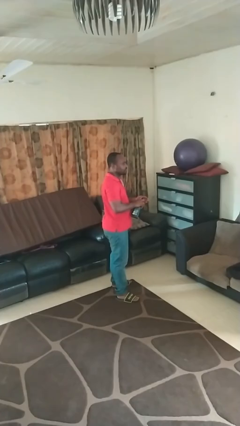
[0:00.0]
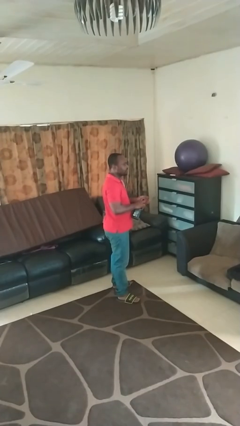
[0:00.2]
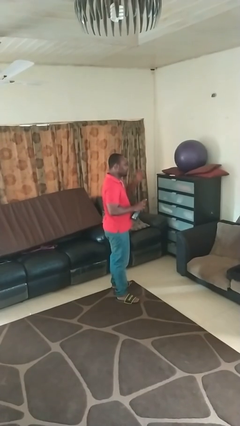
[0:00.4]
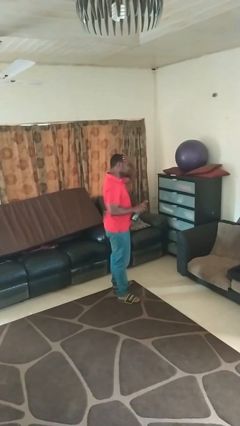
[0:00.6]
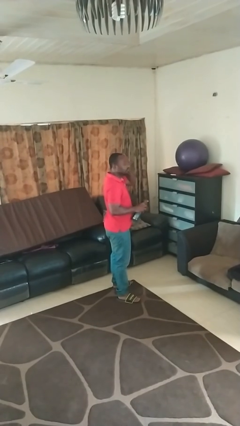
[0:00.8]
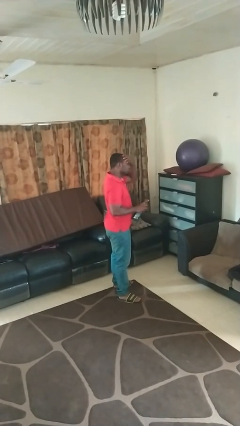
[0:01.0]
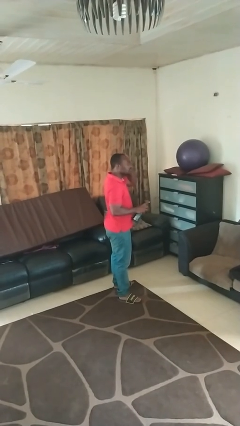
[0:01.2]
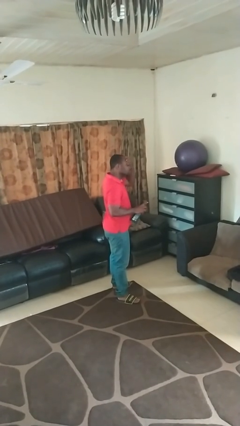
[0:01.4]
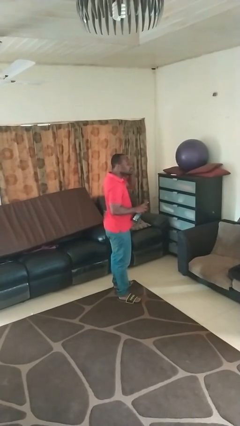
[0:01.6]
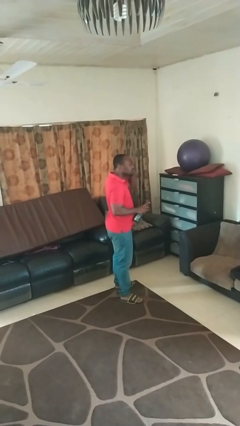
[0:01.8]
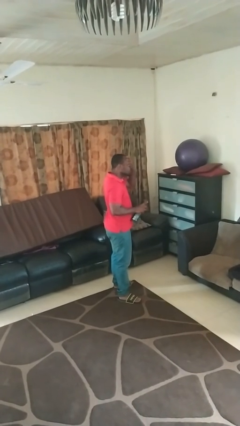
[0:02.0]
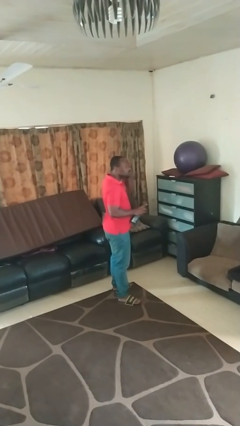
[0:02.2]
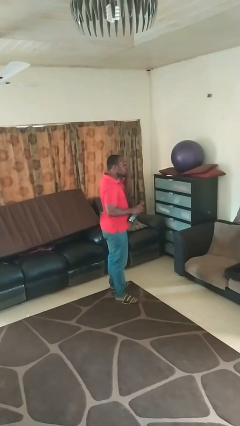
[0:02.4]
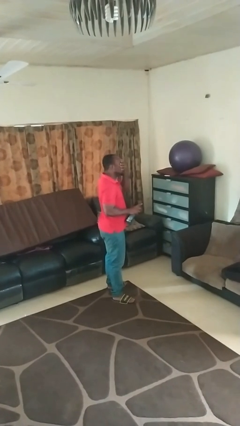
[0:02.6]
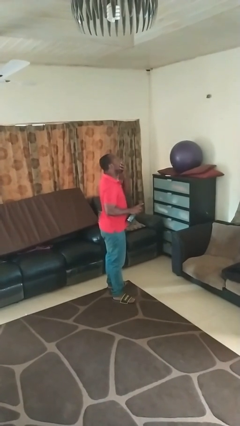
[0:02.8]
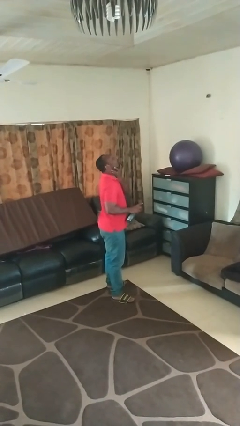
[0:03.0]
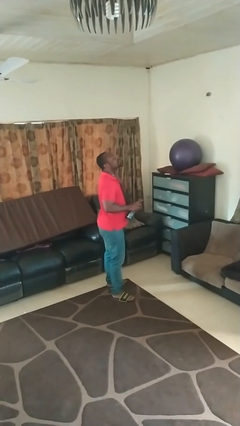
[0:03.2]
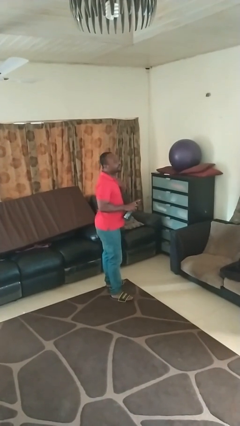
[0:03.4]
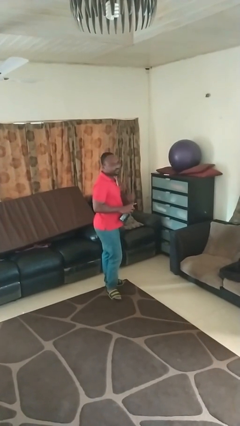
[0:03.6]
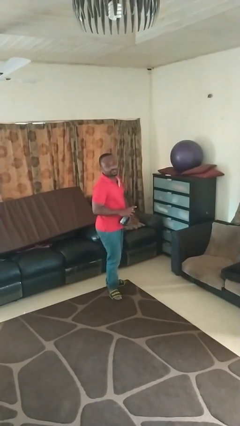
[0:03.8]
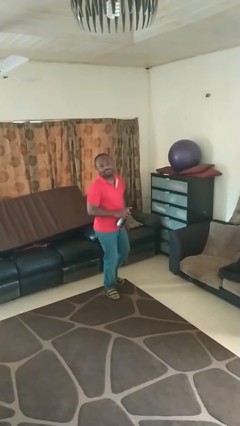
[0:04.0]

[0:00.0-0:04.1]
person applies facial moisturizer

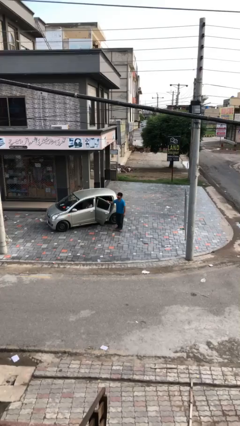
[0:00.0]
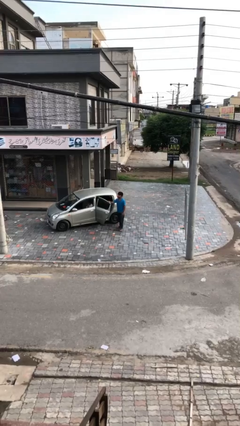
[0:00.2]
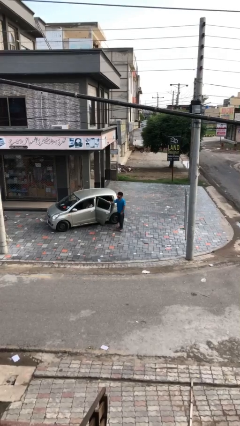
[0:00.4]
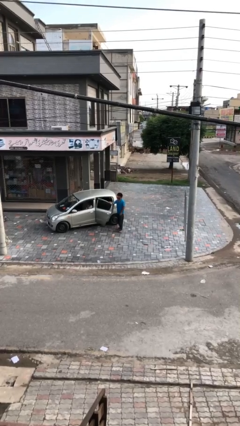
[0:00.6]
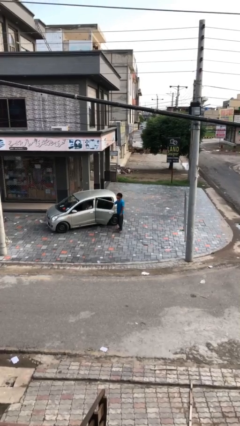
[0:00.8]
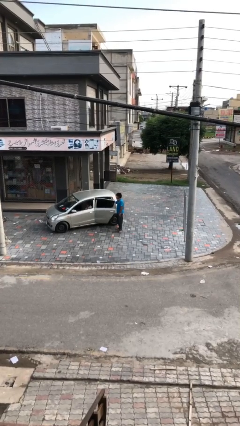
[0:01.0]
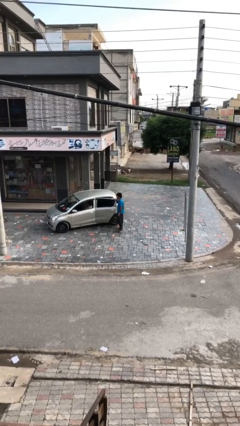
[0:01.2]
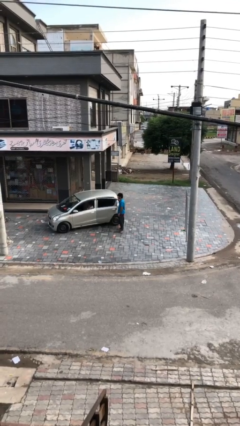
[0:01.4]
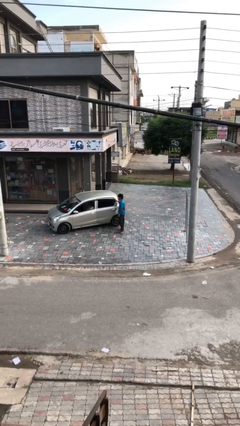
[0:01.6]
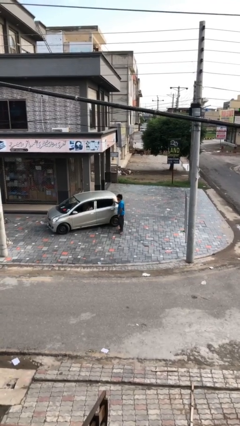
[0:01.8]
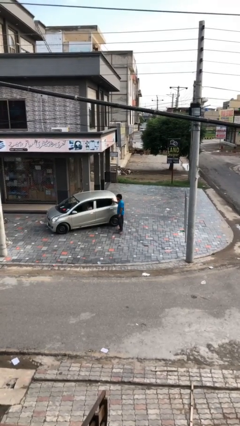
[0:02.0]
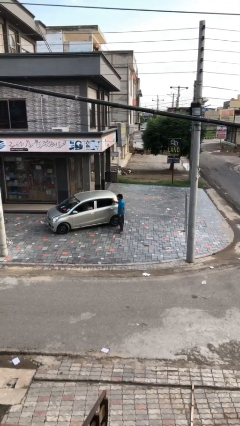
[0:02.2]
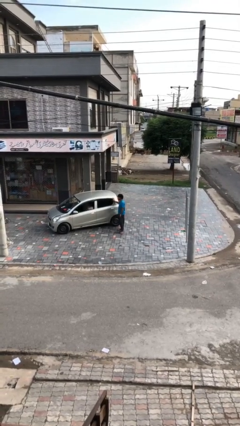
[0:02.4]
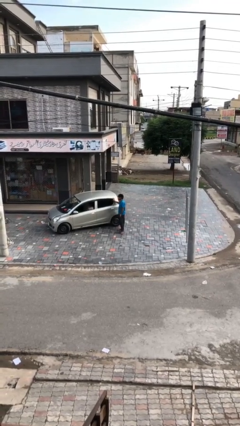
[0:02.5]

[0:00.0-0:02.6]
person closes car door

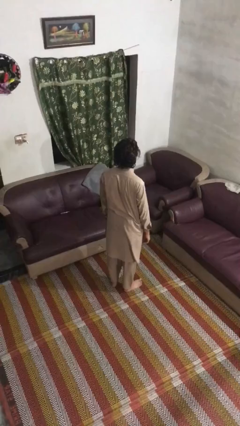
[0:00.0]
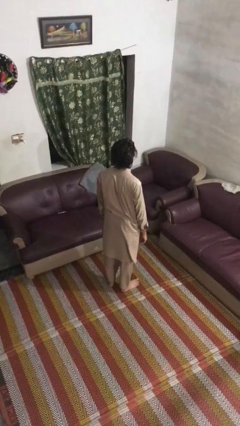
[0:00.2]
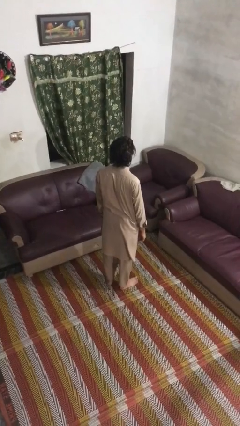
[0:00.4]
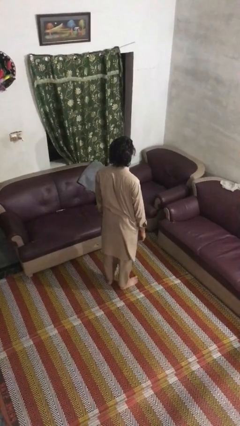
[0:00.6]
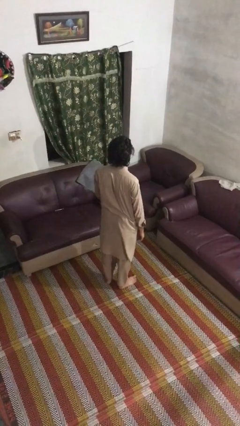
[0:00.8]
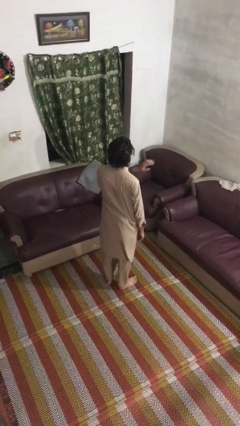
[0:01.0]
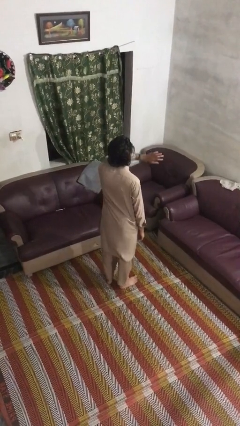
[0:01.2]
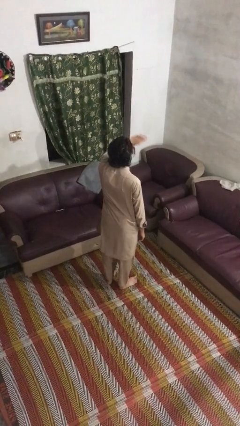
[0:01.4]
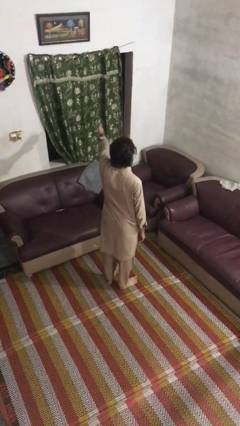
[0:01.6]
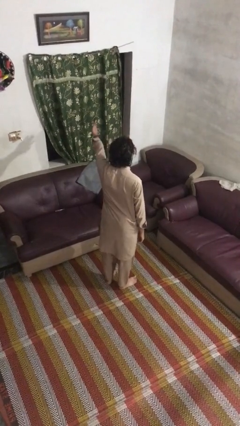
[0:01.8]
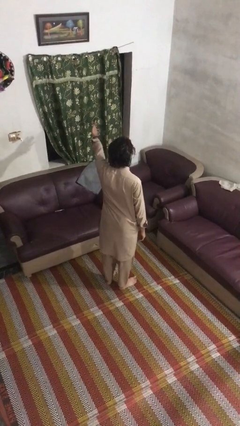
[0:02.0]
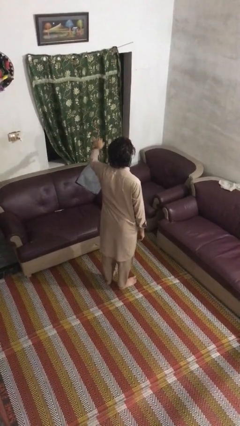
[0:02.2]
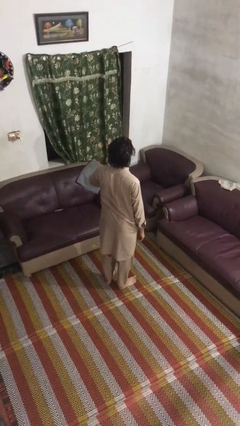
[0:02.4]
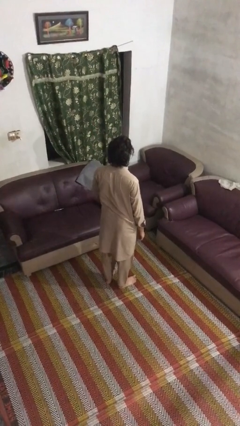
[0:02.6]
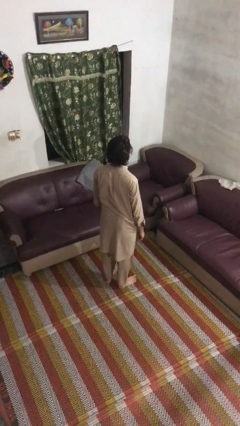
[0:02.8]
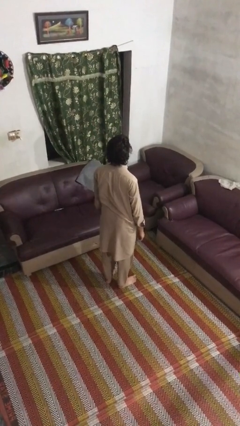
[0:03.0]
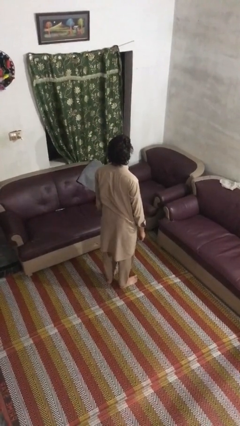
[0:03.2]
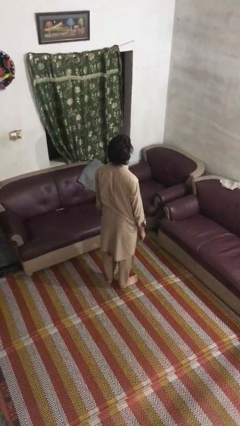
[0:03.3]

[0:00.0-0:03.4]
person gestures swipe left

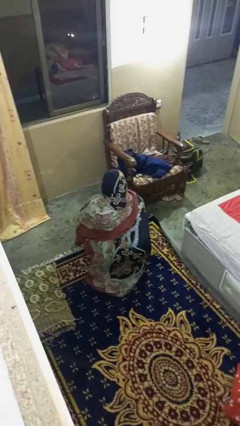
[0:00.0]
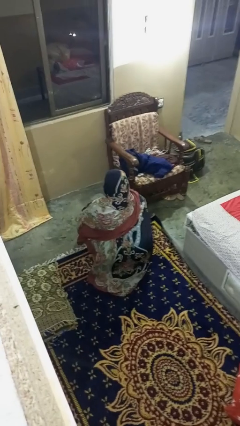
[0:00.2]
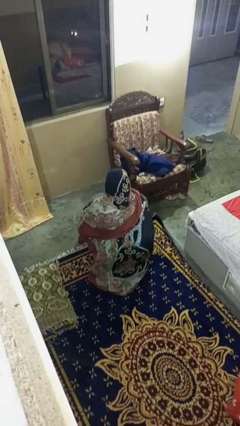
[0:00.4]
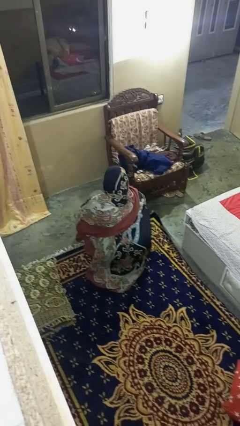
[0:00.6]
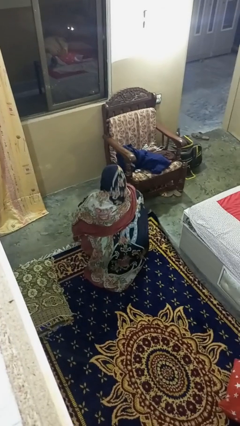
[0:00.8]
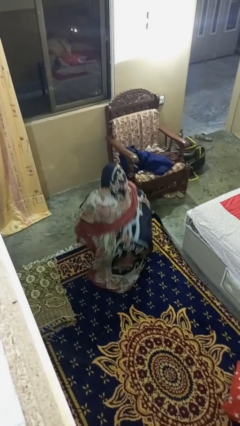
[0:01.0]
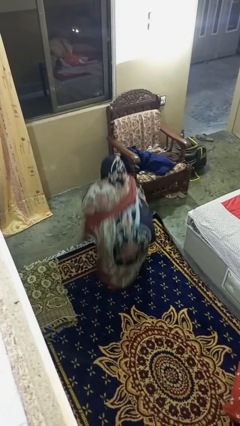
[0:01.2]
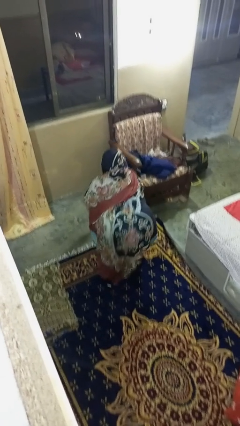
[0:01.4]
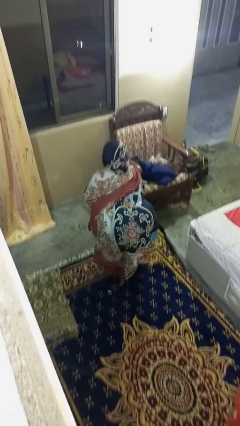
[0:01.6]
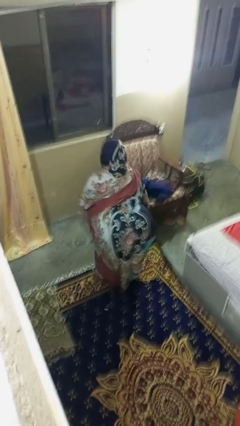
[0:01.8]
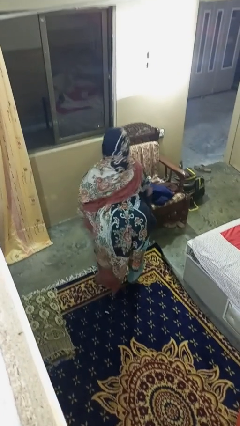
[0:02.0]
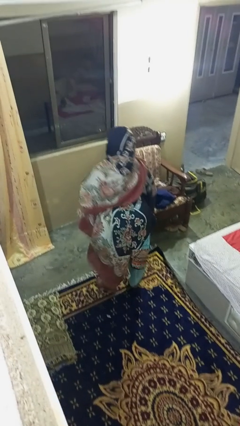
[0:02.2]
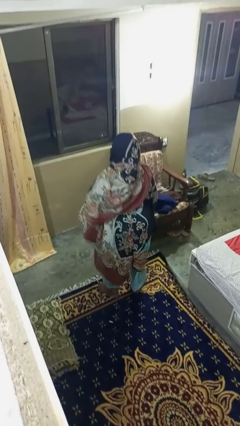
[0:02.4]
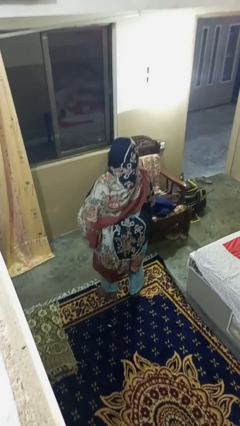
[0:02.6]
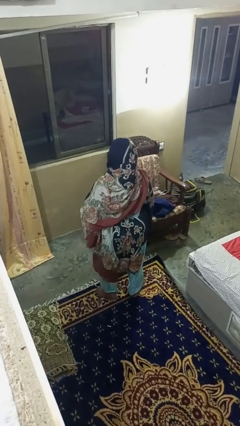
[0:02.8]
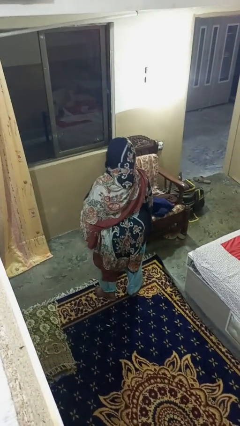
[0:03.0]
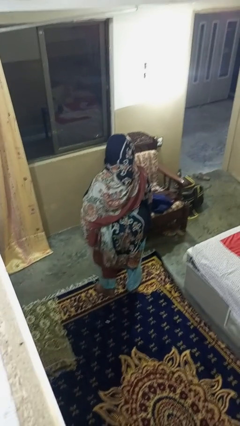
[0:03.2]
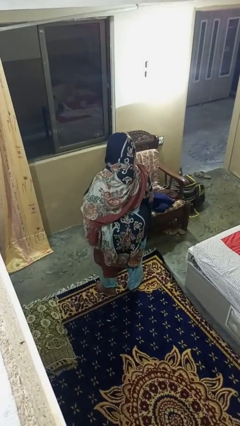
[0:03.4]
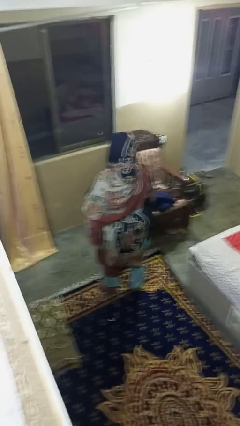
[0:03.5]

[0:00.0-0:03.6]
person stands up

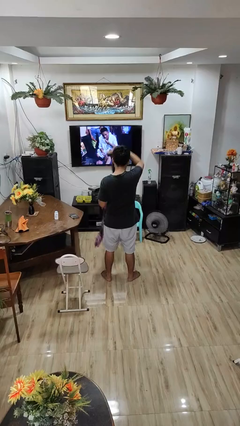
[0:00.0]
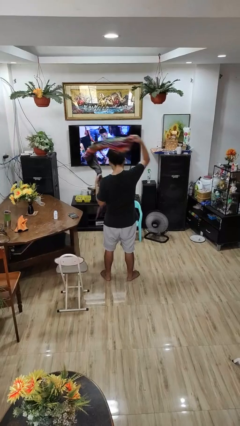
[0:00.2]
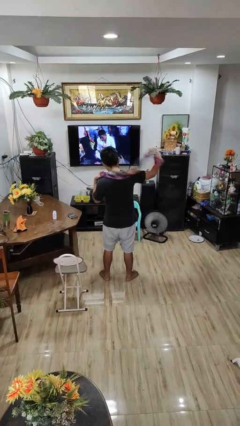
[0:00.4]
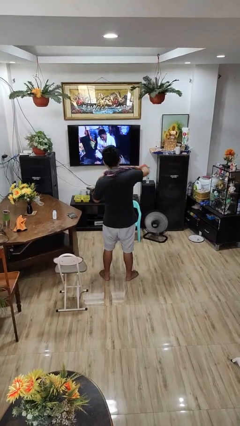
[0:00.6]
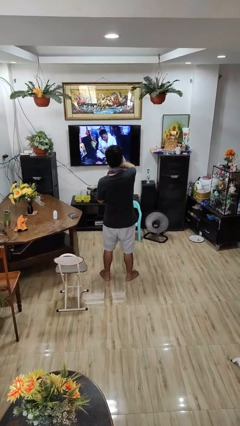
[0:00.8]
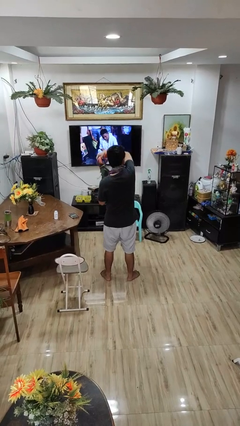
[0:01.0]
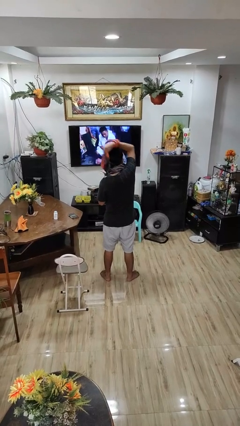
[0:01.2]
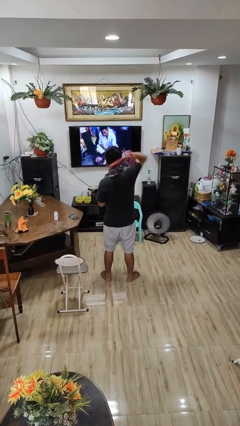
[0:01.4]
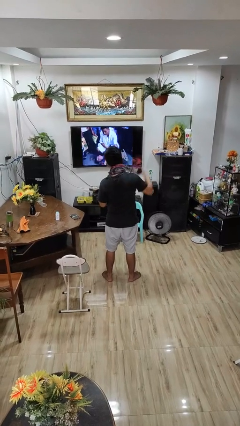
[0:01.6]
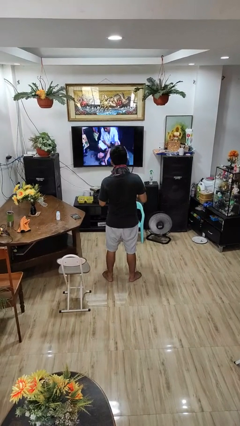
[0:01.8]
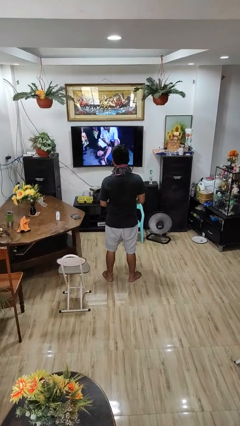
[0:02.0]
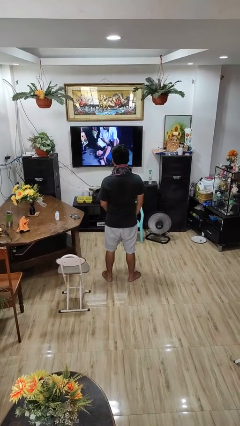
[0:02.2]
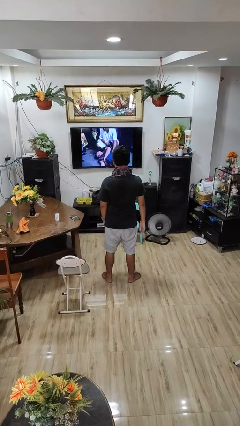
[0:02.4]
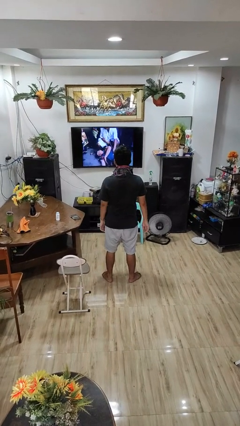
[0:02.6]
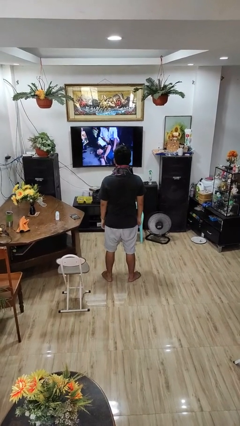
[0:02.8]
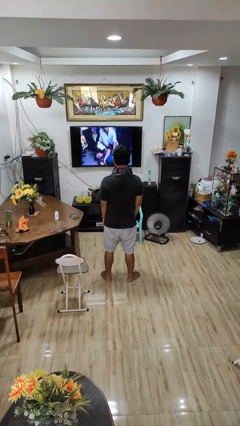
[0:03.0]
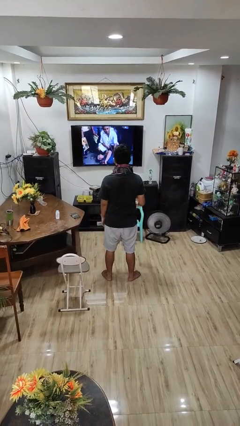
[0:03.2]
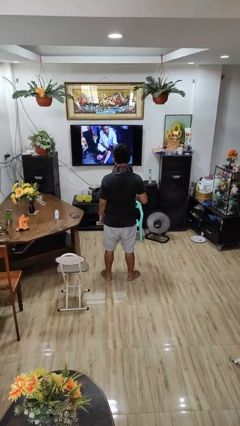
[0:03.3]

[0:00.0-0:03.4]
person puts on scarf
